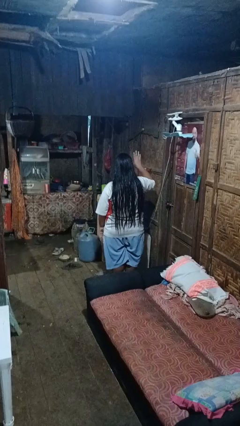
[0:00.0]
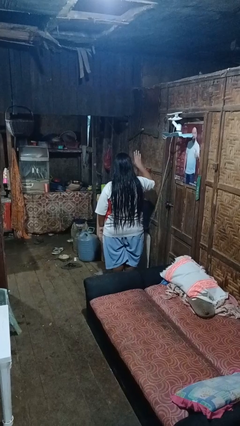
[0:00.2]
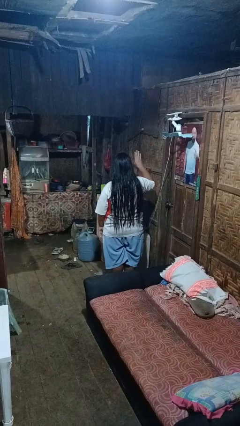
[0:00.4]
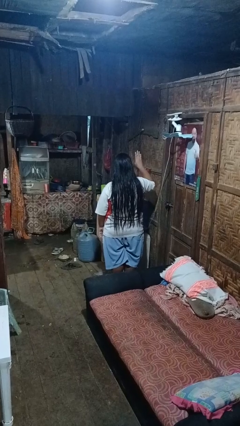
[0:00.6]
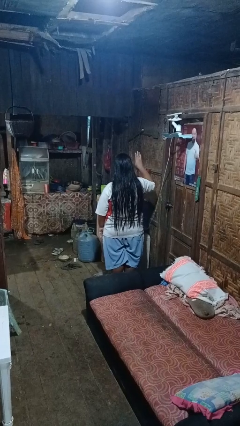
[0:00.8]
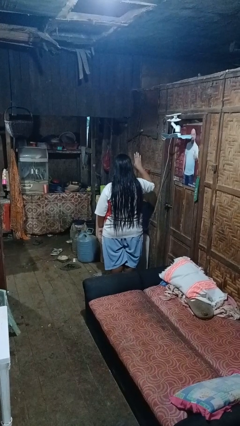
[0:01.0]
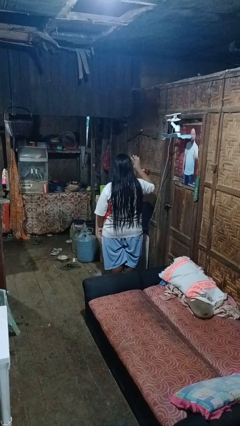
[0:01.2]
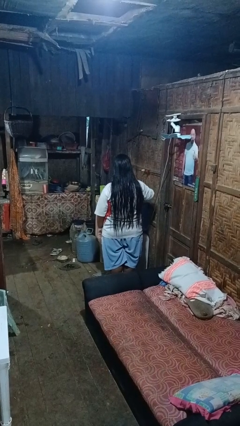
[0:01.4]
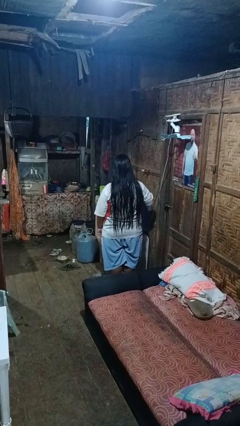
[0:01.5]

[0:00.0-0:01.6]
person gestures number four

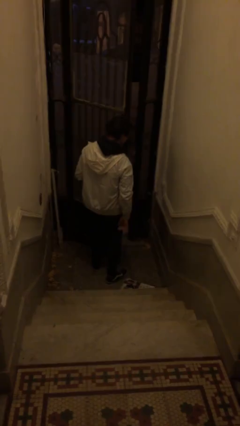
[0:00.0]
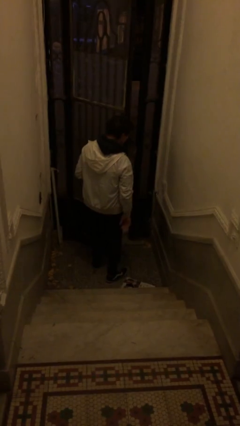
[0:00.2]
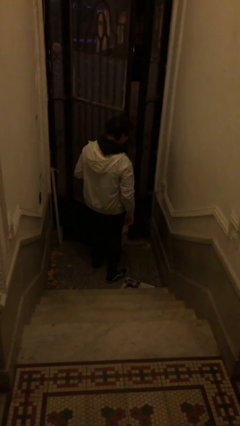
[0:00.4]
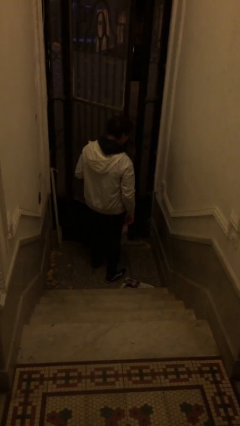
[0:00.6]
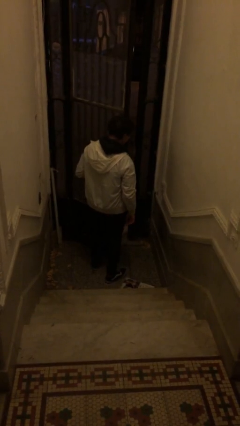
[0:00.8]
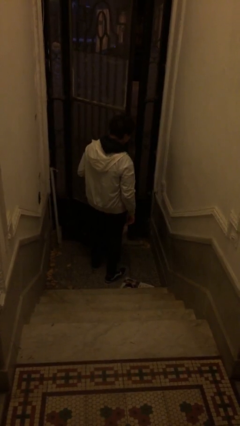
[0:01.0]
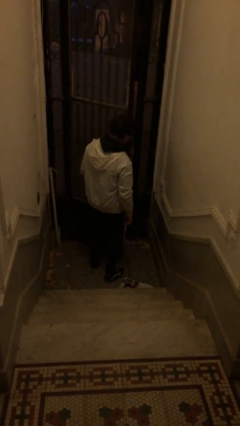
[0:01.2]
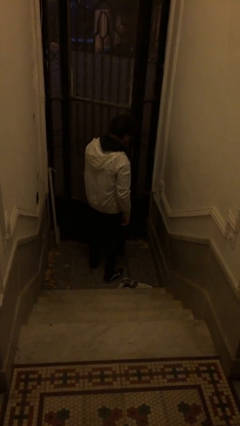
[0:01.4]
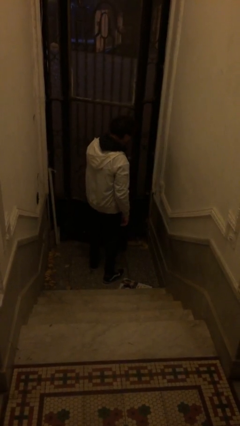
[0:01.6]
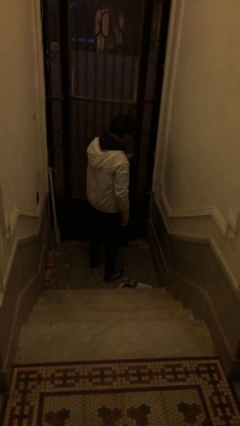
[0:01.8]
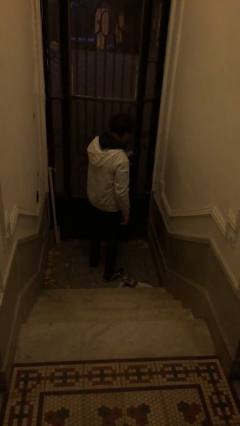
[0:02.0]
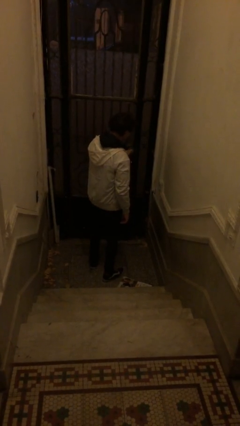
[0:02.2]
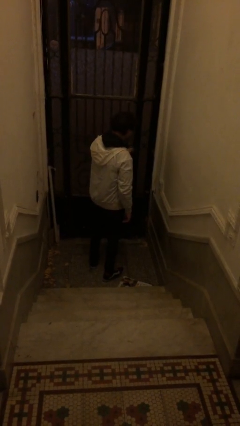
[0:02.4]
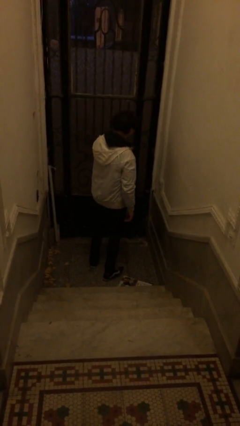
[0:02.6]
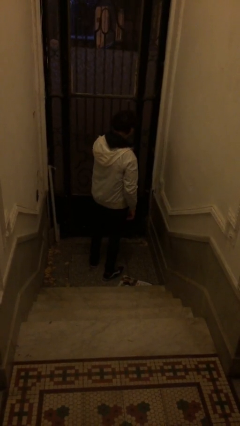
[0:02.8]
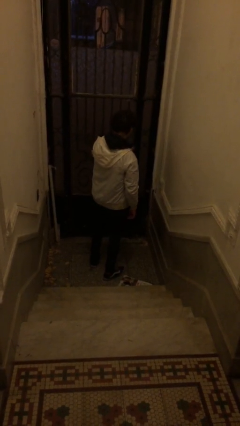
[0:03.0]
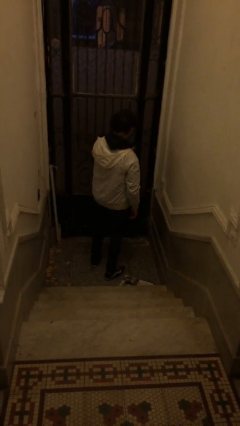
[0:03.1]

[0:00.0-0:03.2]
person closes facility door

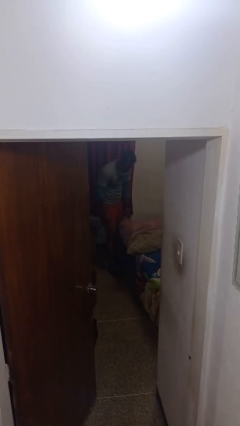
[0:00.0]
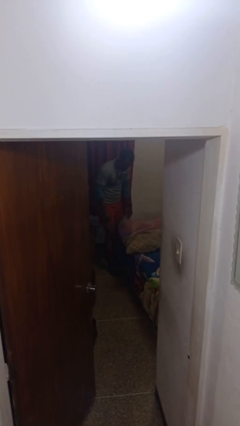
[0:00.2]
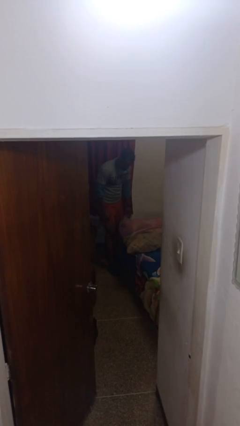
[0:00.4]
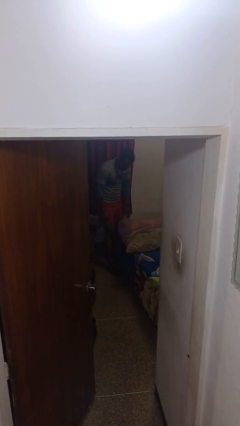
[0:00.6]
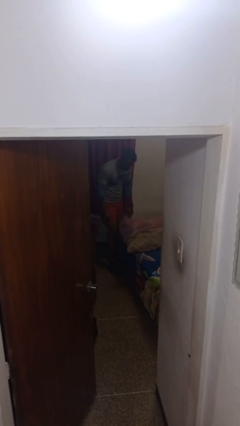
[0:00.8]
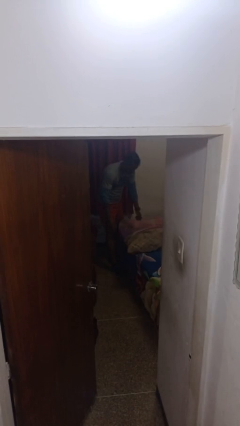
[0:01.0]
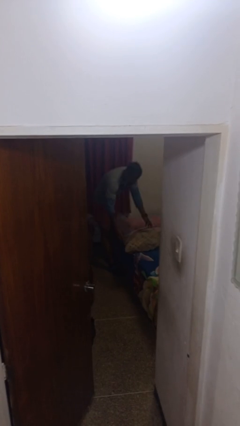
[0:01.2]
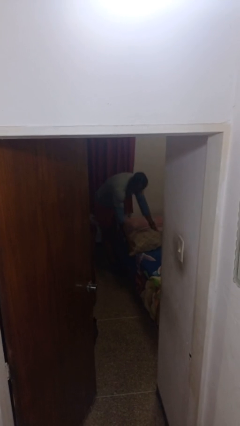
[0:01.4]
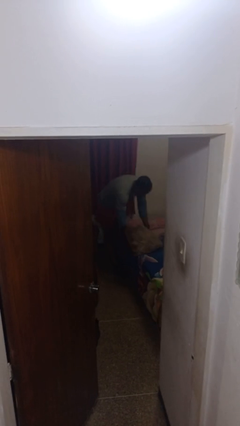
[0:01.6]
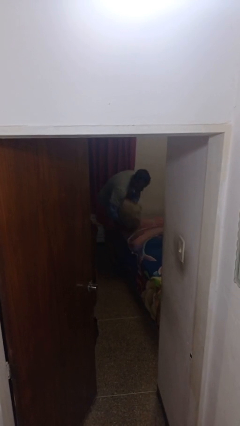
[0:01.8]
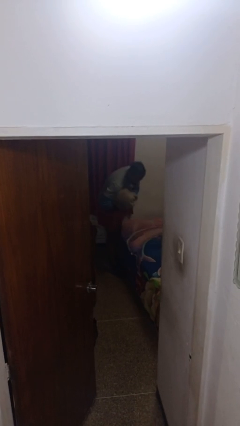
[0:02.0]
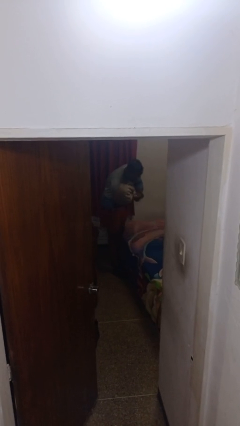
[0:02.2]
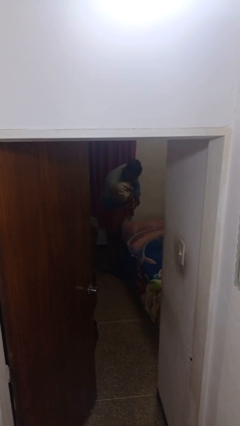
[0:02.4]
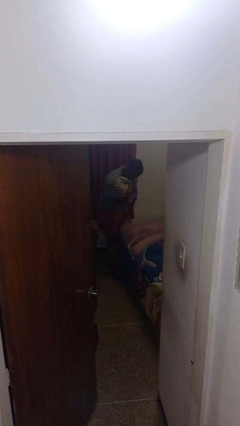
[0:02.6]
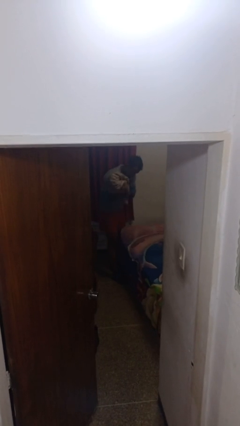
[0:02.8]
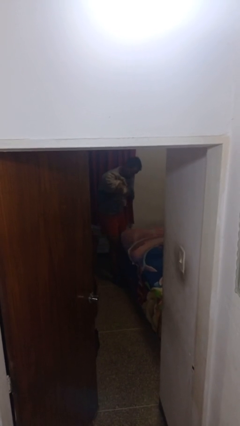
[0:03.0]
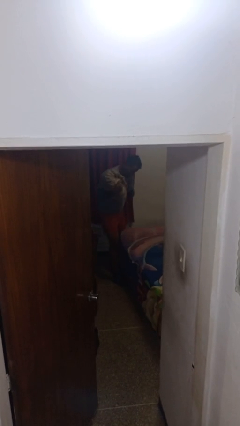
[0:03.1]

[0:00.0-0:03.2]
person picks up object from bed

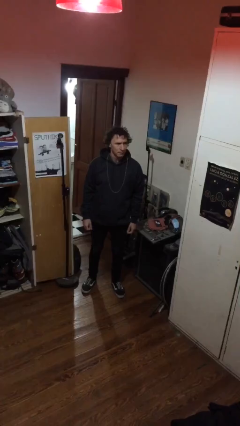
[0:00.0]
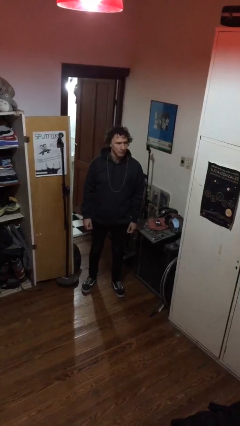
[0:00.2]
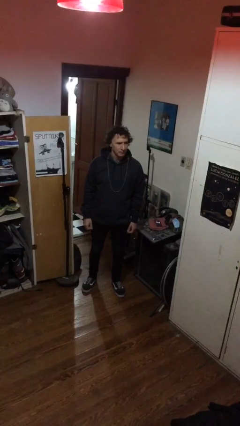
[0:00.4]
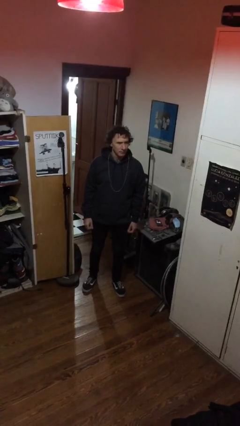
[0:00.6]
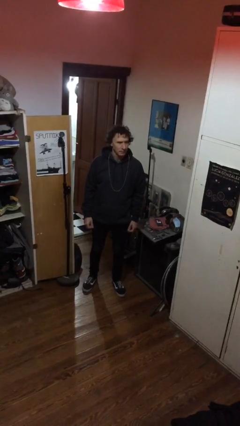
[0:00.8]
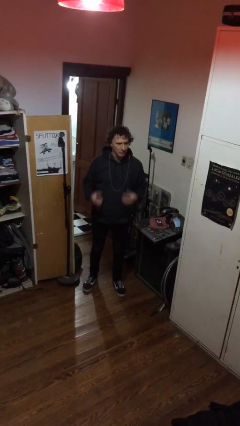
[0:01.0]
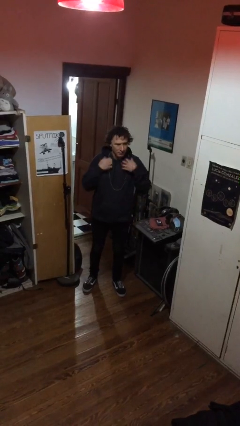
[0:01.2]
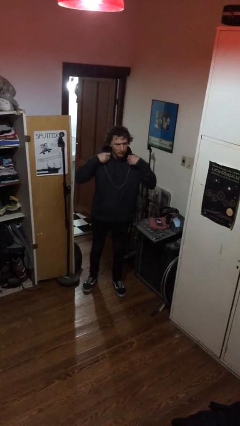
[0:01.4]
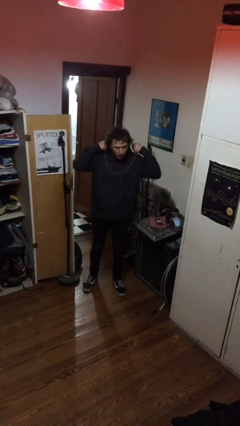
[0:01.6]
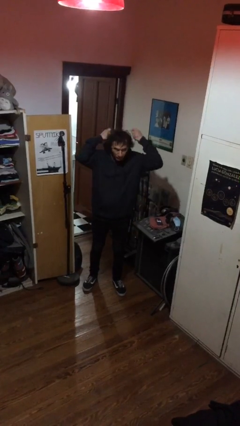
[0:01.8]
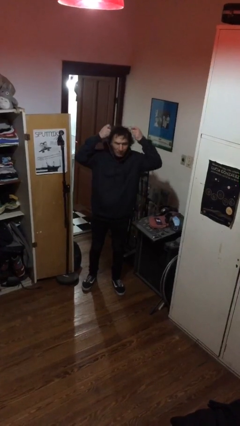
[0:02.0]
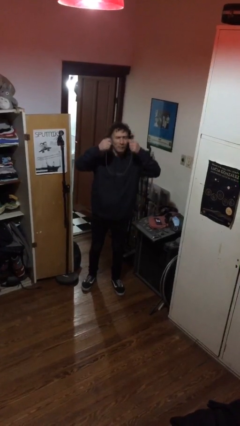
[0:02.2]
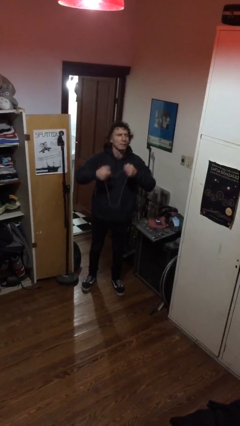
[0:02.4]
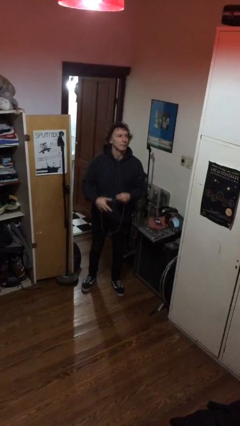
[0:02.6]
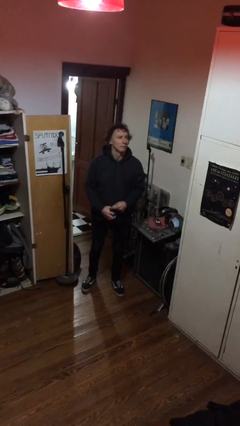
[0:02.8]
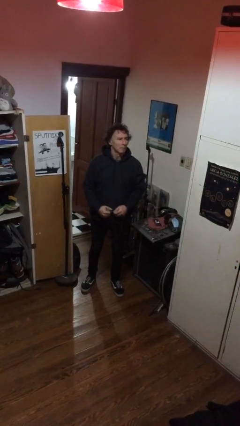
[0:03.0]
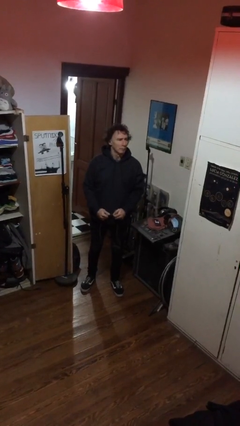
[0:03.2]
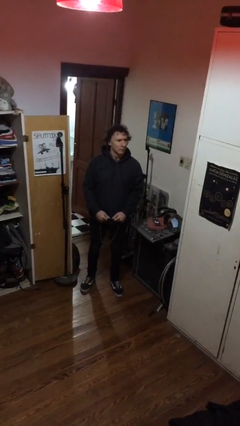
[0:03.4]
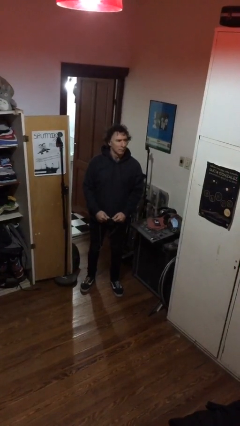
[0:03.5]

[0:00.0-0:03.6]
person takes off necklace

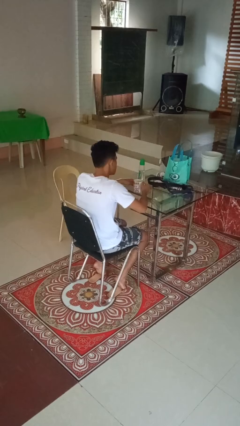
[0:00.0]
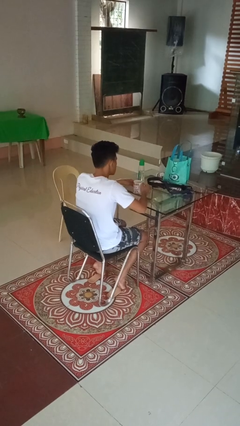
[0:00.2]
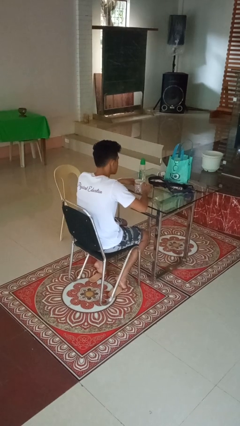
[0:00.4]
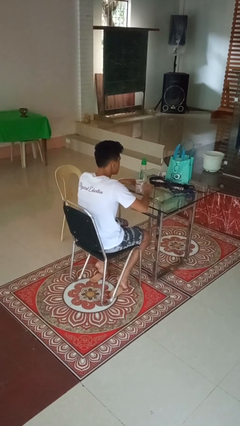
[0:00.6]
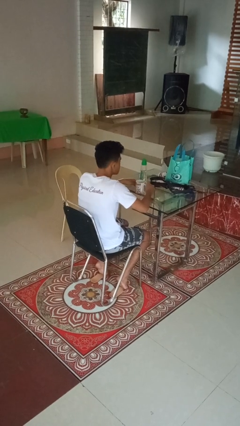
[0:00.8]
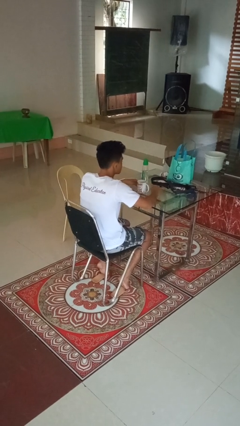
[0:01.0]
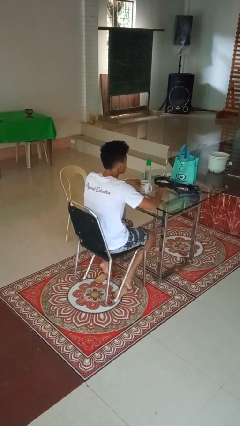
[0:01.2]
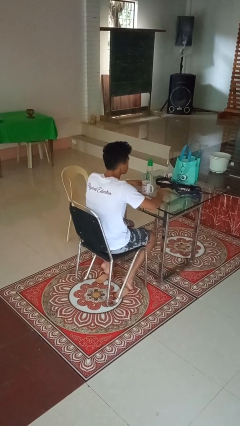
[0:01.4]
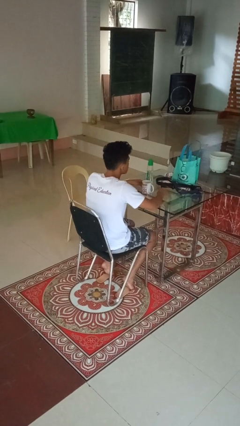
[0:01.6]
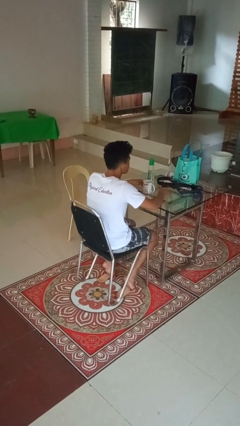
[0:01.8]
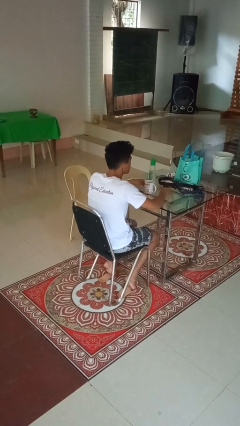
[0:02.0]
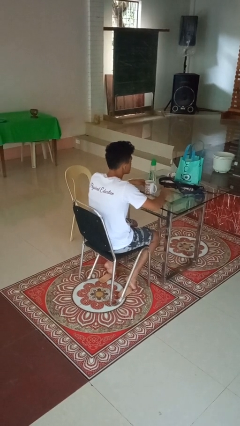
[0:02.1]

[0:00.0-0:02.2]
person puts down object on table

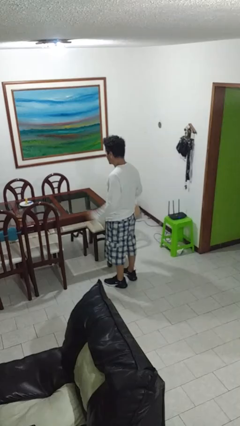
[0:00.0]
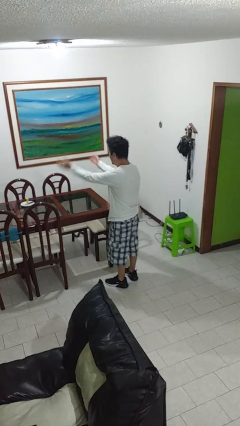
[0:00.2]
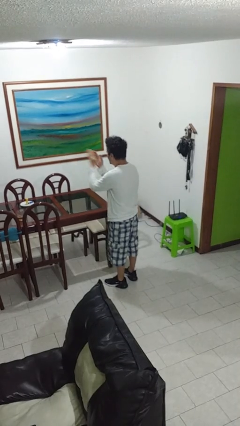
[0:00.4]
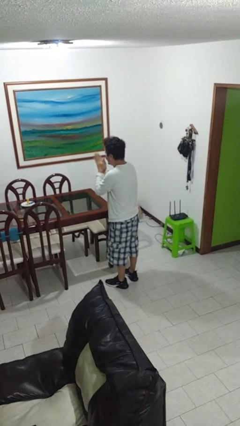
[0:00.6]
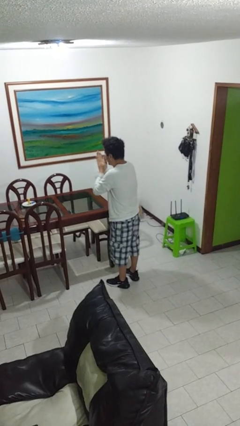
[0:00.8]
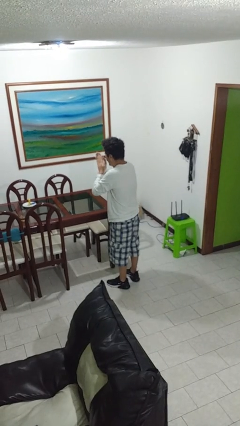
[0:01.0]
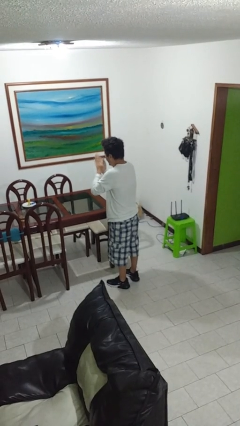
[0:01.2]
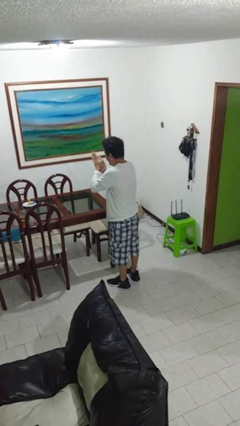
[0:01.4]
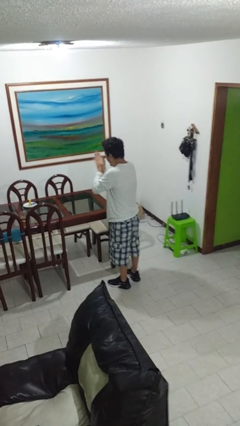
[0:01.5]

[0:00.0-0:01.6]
person blows into hands

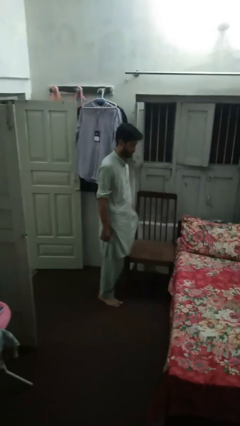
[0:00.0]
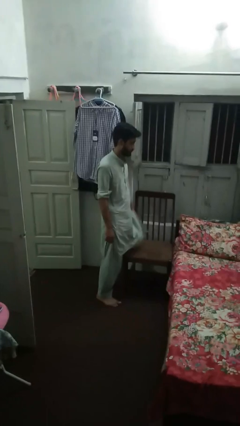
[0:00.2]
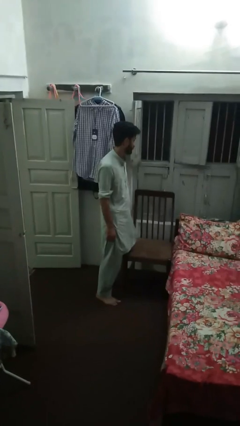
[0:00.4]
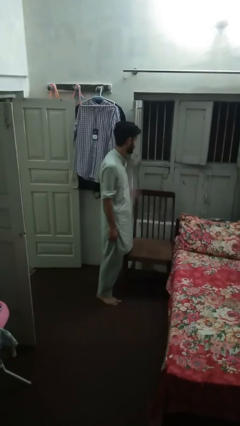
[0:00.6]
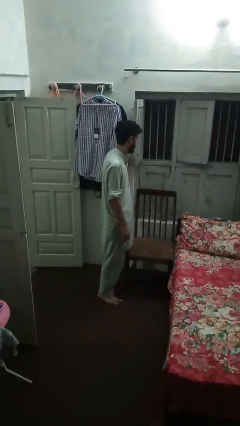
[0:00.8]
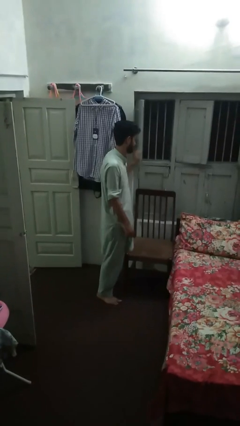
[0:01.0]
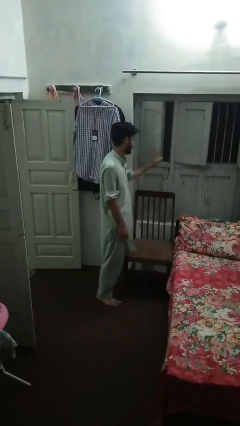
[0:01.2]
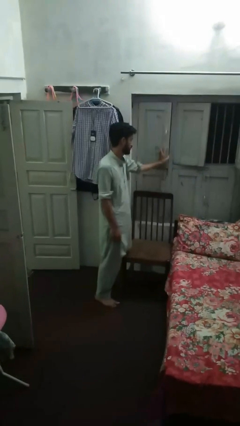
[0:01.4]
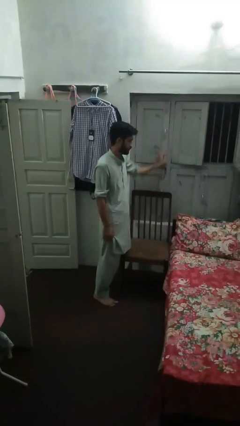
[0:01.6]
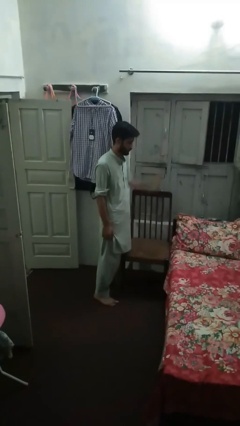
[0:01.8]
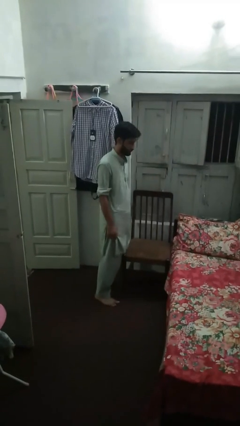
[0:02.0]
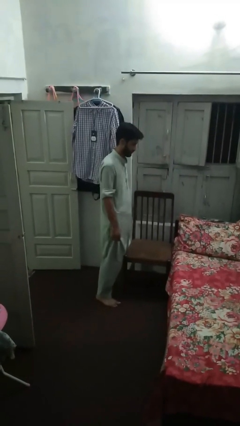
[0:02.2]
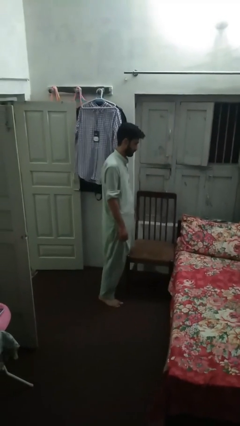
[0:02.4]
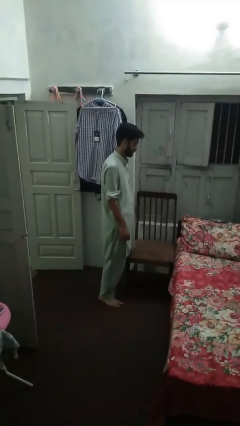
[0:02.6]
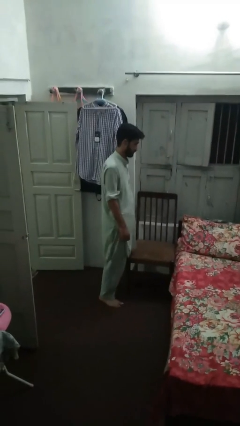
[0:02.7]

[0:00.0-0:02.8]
person closes home window
